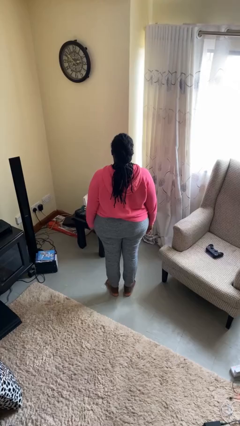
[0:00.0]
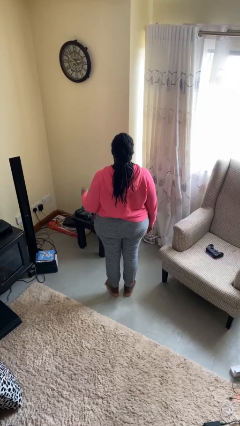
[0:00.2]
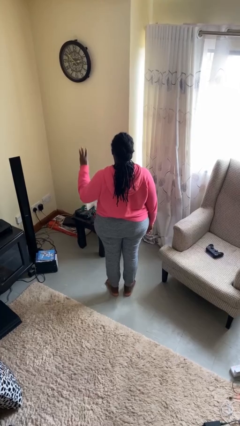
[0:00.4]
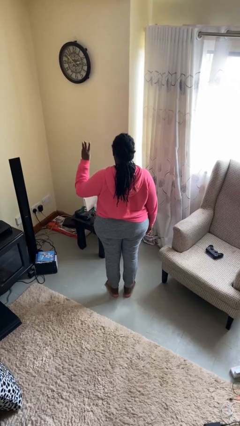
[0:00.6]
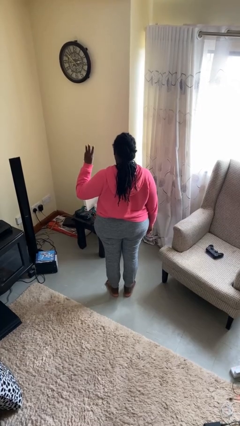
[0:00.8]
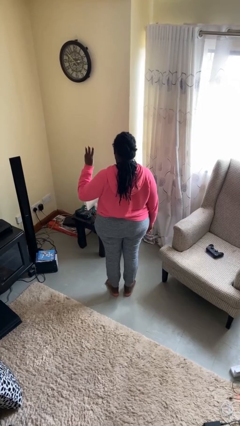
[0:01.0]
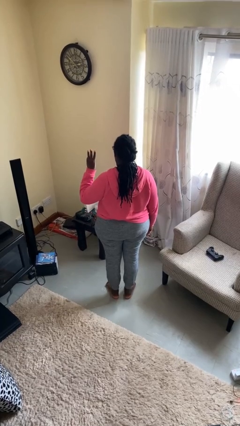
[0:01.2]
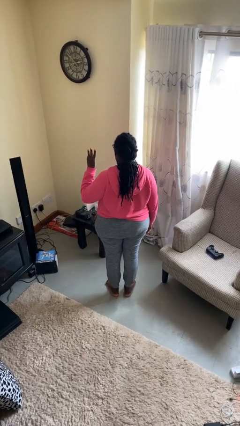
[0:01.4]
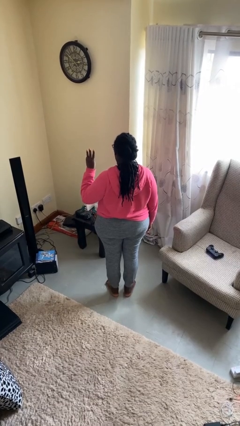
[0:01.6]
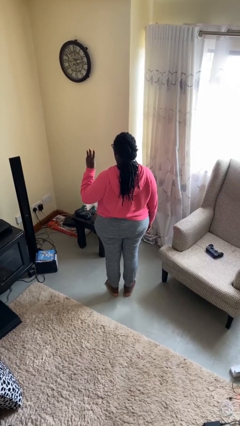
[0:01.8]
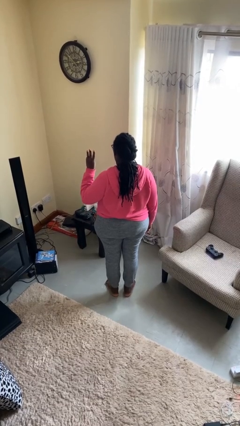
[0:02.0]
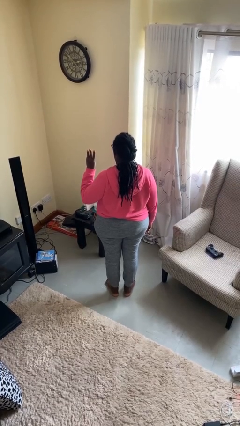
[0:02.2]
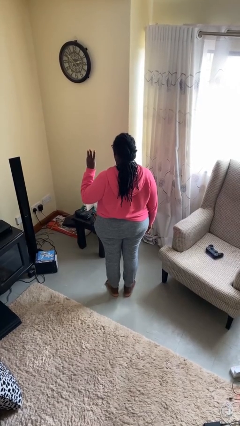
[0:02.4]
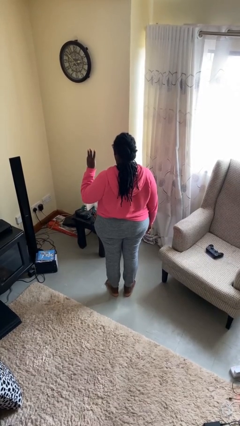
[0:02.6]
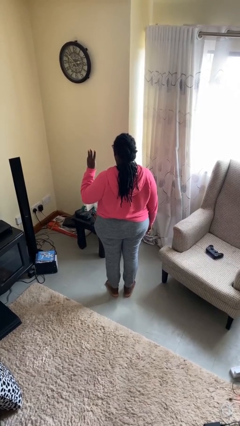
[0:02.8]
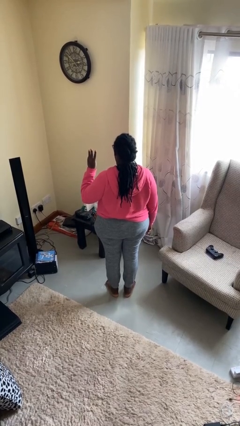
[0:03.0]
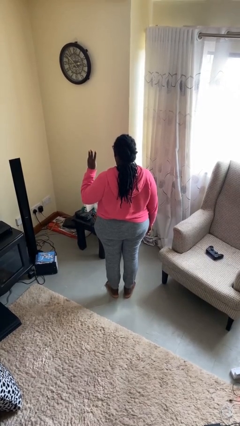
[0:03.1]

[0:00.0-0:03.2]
person gestures number three

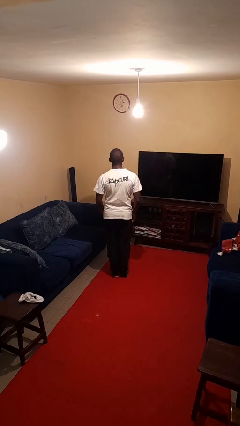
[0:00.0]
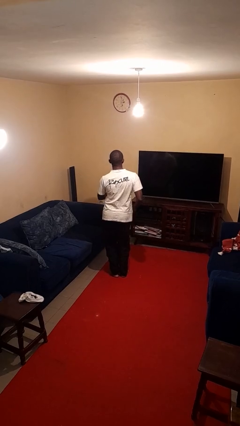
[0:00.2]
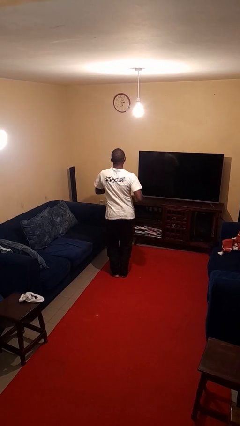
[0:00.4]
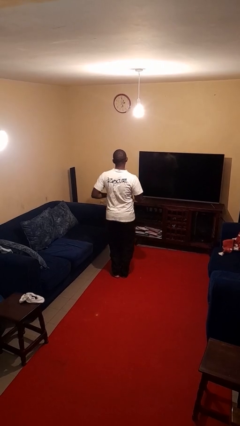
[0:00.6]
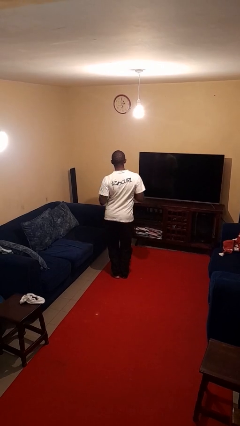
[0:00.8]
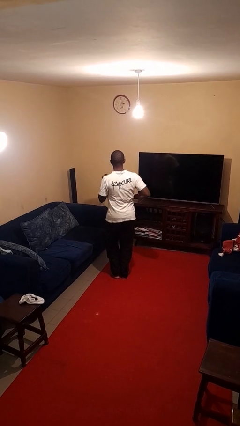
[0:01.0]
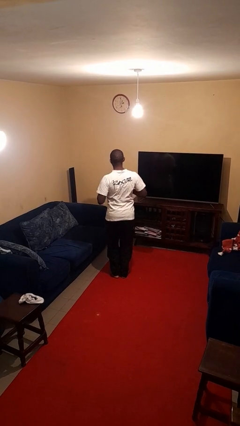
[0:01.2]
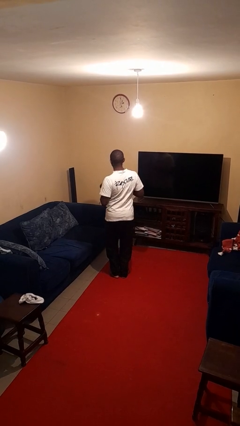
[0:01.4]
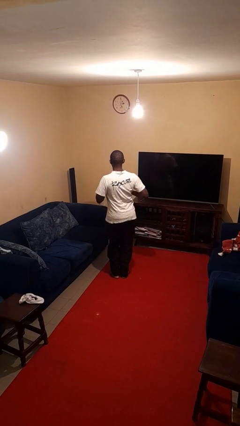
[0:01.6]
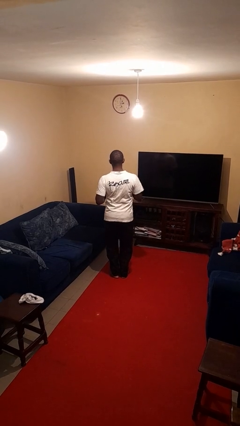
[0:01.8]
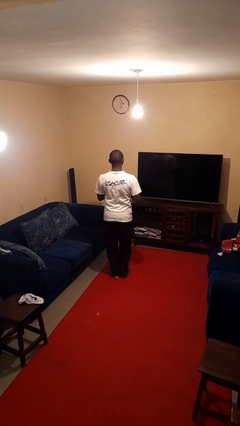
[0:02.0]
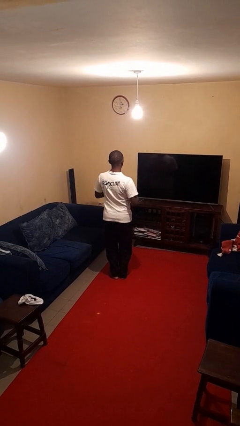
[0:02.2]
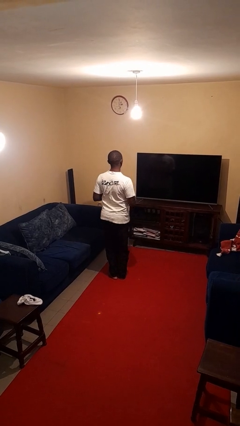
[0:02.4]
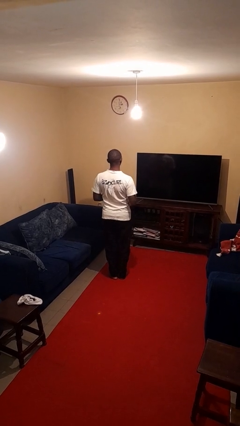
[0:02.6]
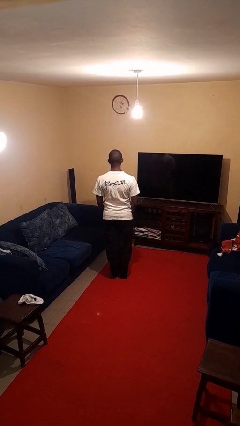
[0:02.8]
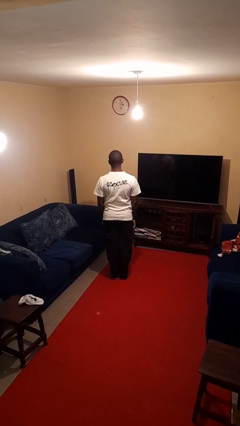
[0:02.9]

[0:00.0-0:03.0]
person dances in place

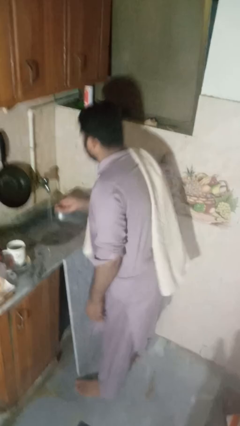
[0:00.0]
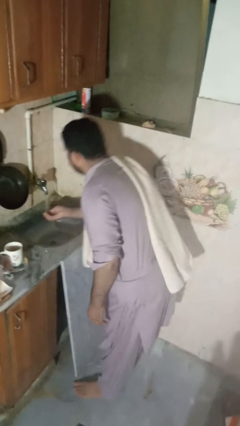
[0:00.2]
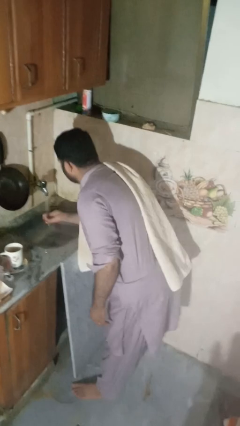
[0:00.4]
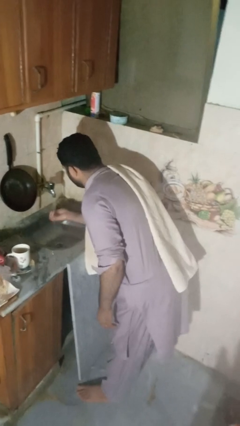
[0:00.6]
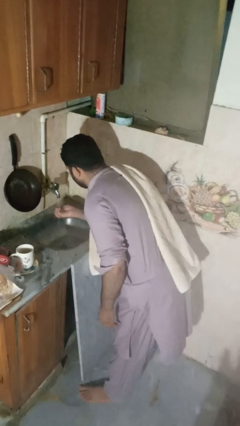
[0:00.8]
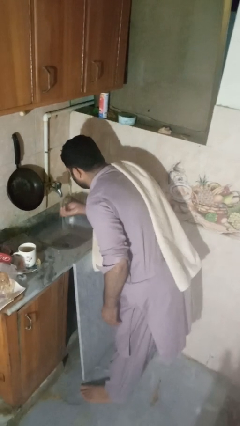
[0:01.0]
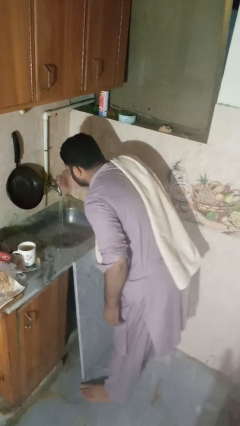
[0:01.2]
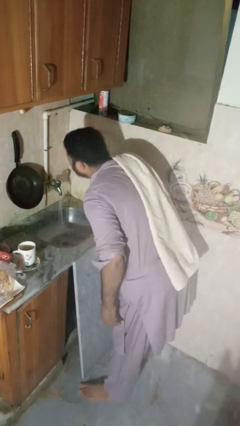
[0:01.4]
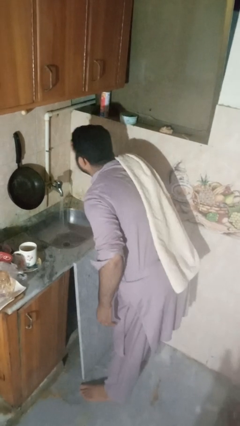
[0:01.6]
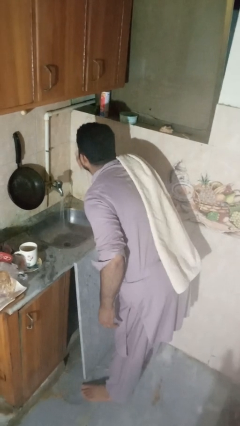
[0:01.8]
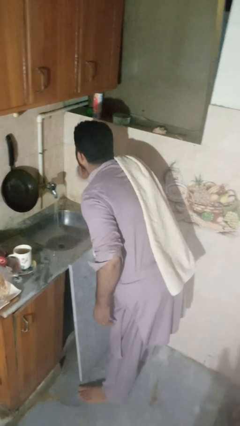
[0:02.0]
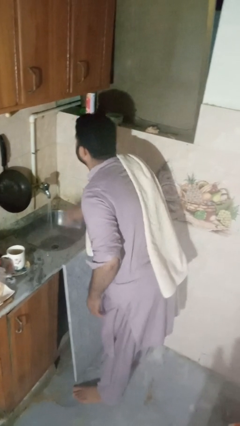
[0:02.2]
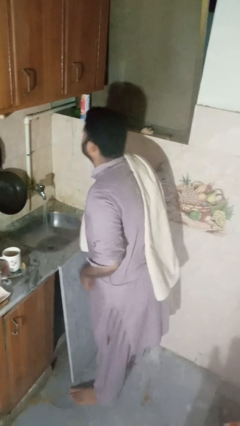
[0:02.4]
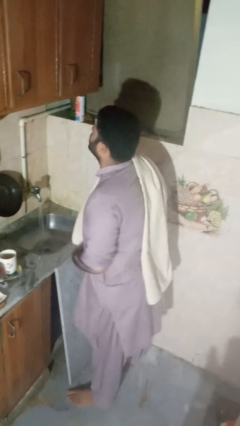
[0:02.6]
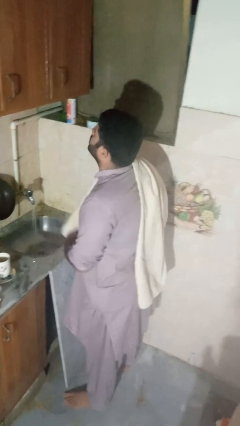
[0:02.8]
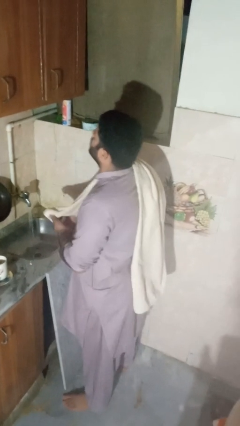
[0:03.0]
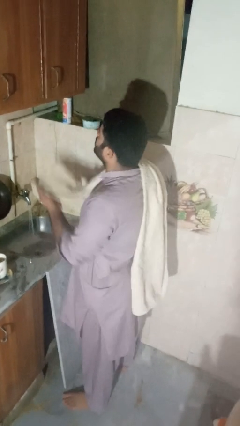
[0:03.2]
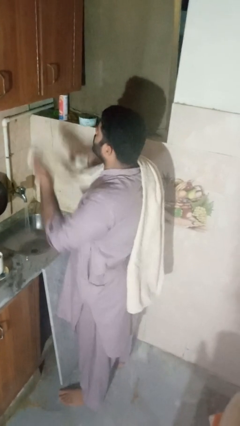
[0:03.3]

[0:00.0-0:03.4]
person washes face

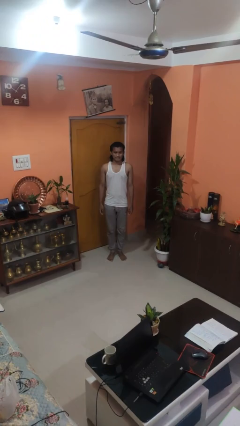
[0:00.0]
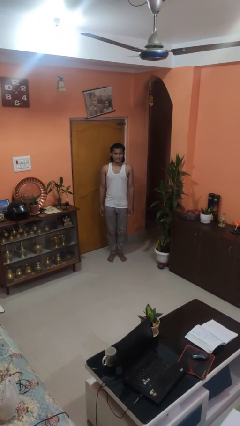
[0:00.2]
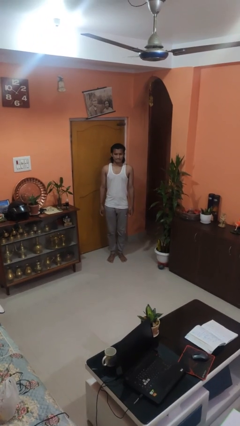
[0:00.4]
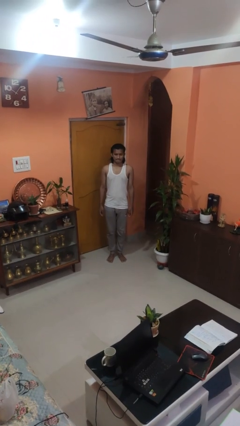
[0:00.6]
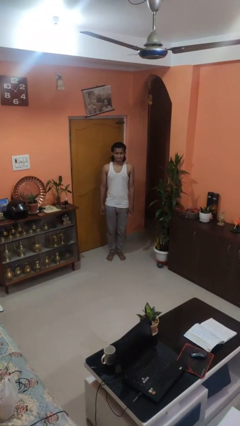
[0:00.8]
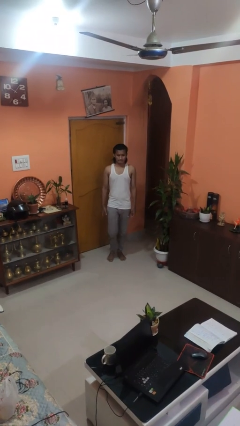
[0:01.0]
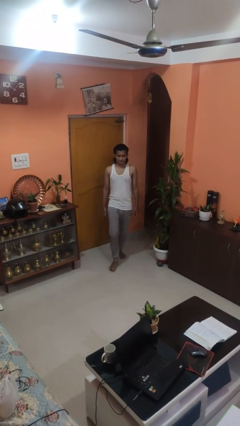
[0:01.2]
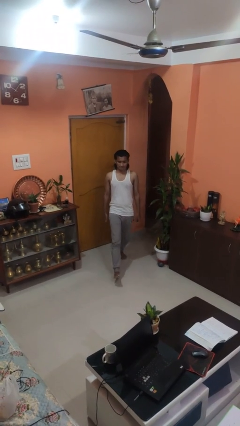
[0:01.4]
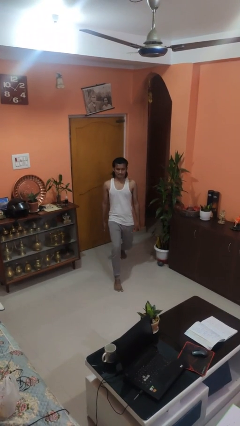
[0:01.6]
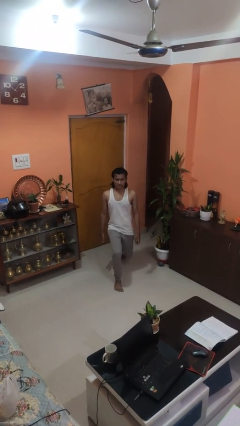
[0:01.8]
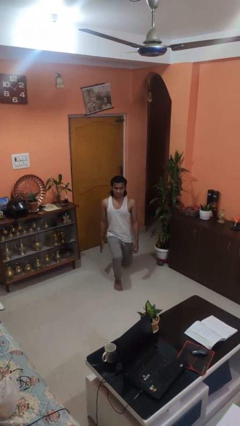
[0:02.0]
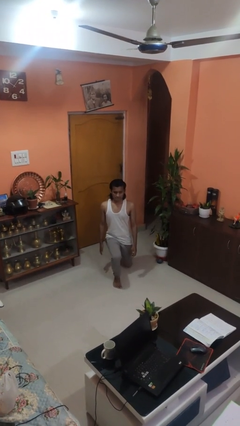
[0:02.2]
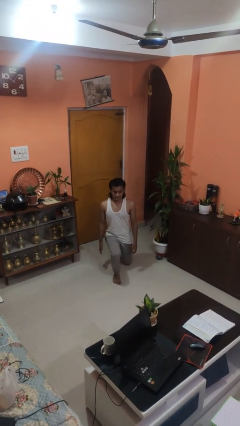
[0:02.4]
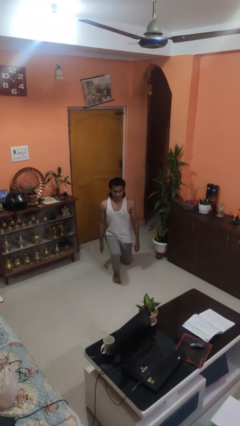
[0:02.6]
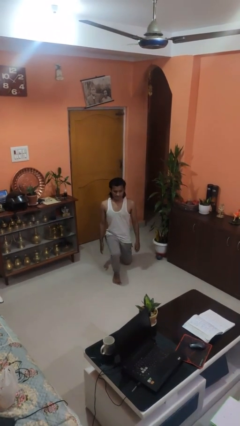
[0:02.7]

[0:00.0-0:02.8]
person kneels

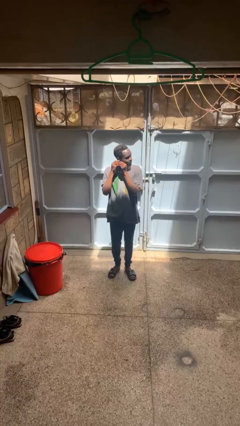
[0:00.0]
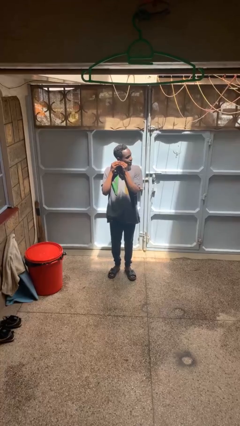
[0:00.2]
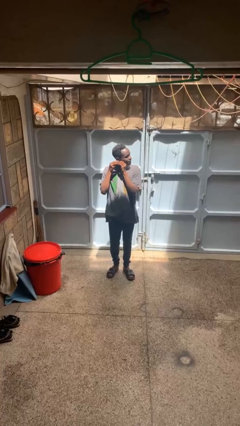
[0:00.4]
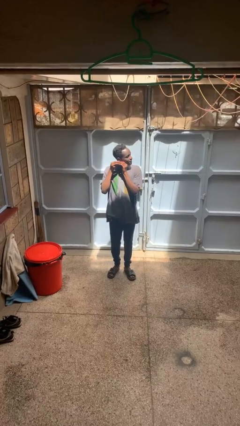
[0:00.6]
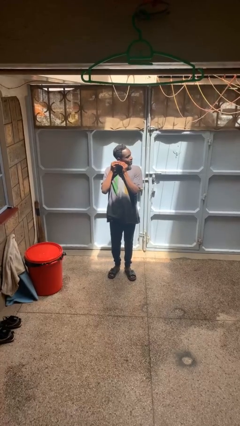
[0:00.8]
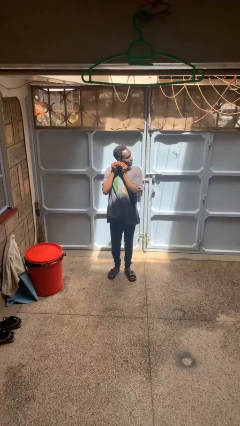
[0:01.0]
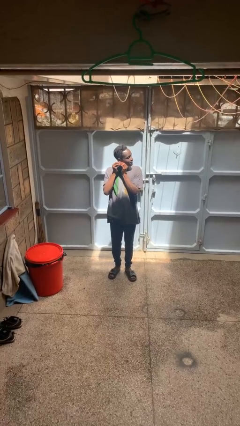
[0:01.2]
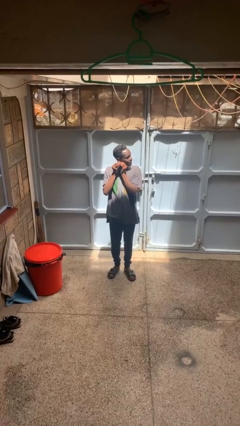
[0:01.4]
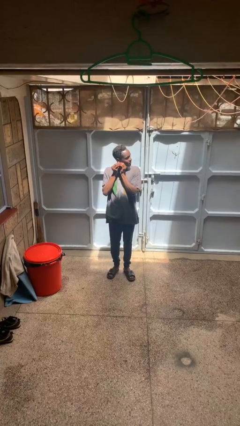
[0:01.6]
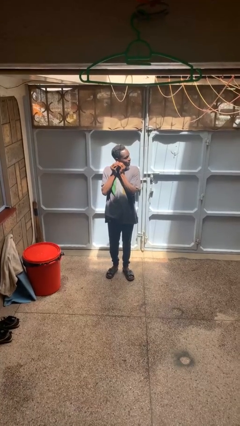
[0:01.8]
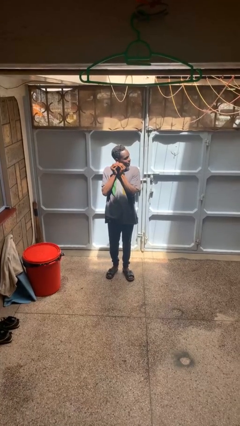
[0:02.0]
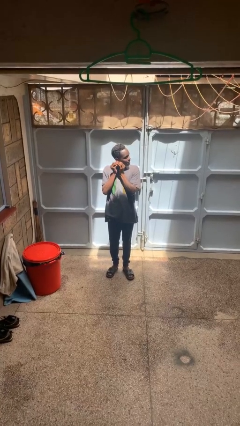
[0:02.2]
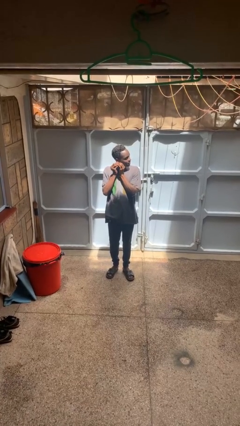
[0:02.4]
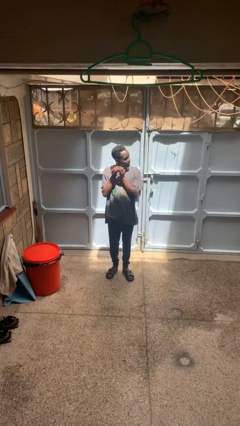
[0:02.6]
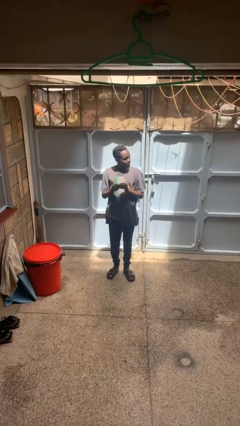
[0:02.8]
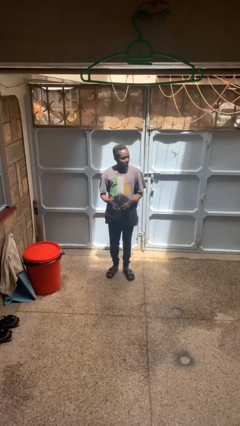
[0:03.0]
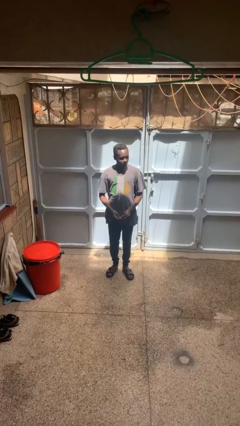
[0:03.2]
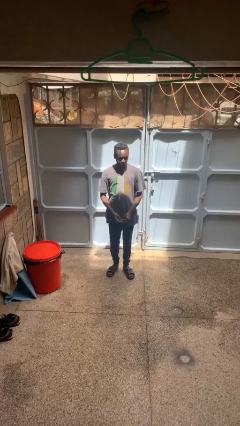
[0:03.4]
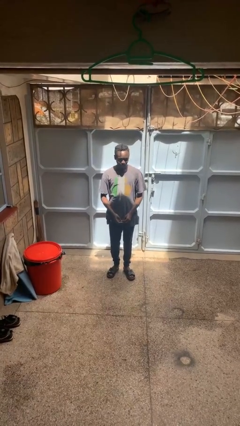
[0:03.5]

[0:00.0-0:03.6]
person takes off earrings

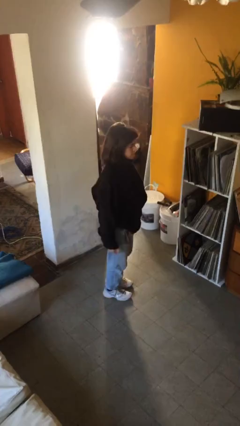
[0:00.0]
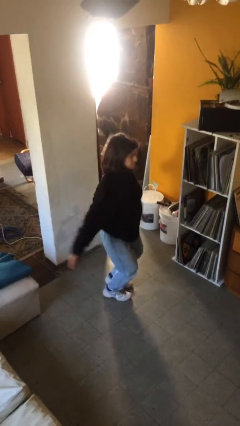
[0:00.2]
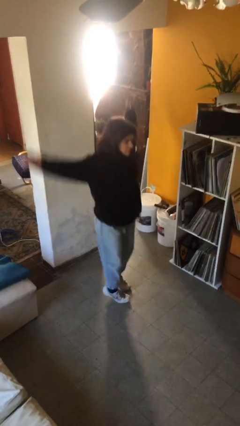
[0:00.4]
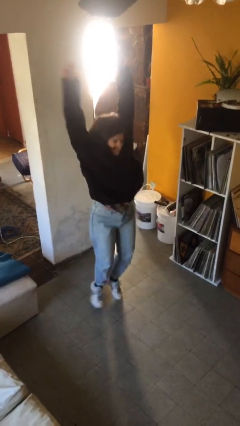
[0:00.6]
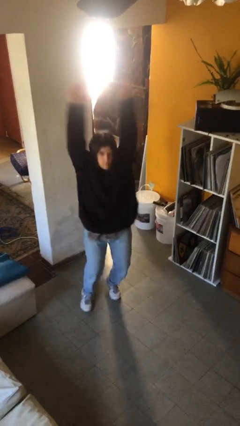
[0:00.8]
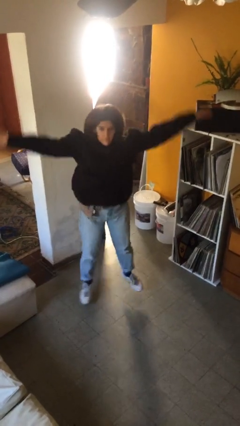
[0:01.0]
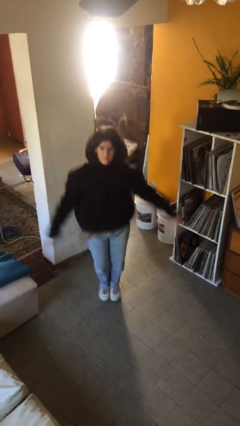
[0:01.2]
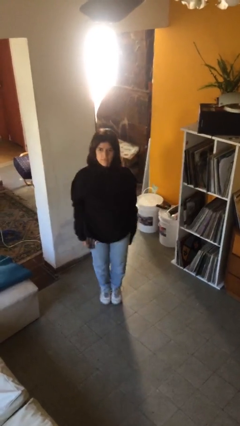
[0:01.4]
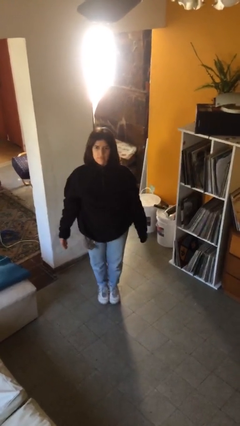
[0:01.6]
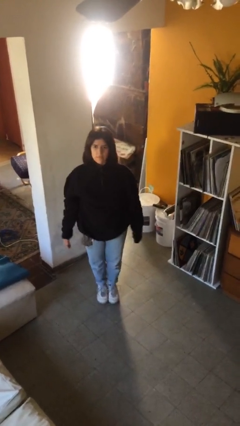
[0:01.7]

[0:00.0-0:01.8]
person exercises with jumping jacks
